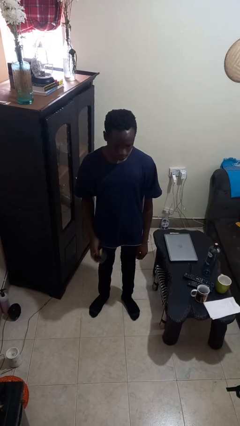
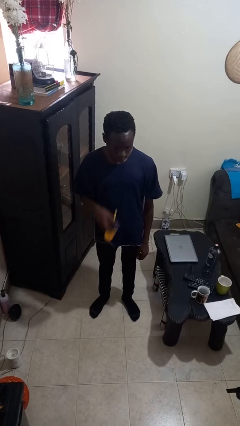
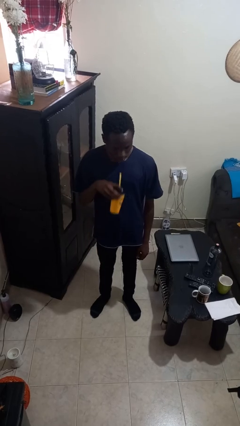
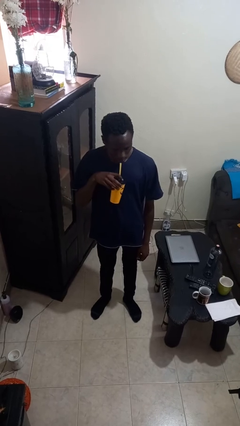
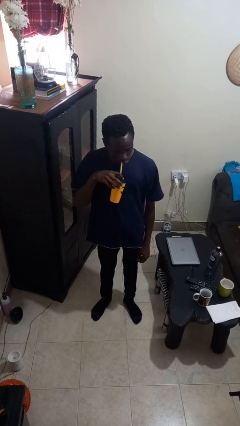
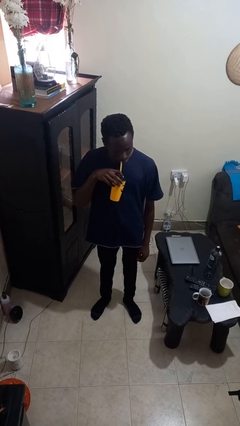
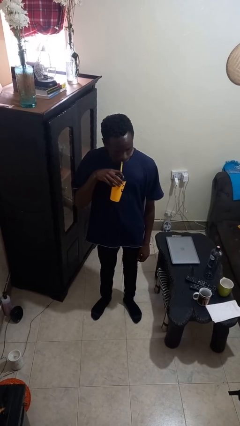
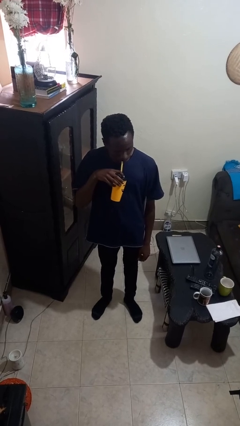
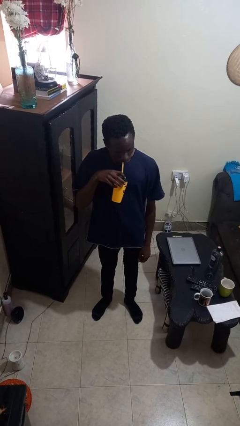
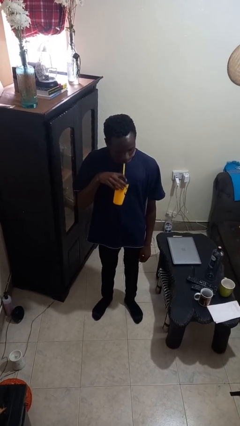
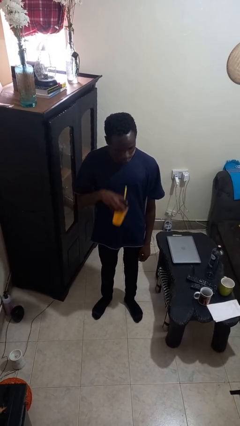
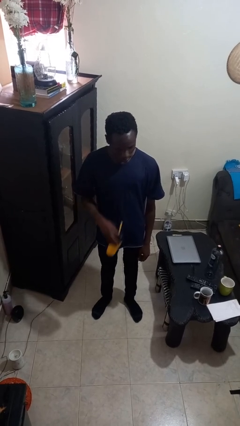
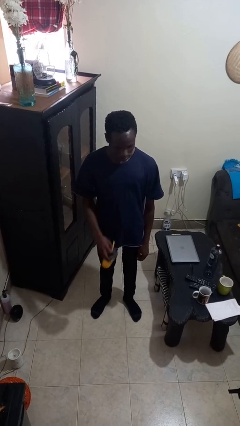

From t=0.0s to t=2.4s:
person drinks from straw

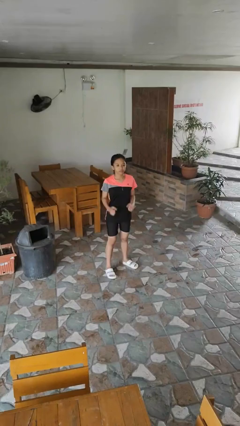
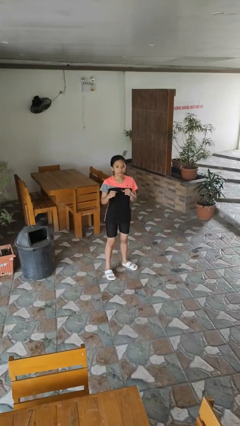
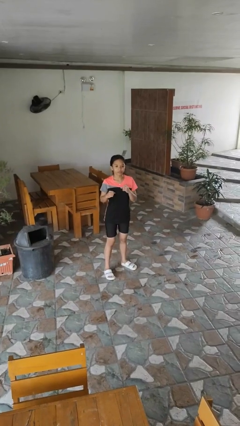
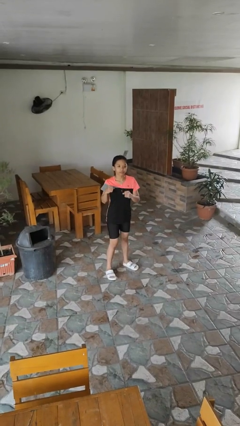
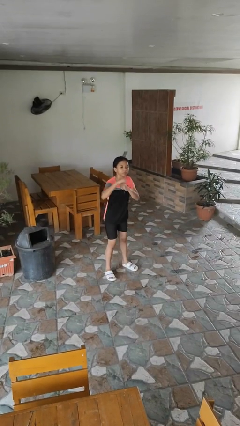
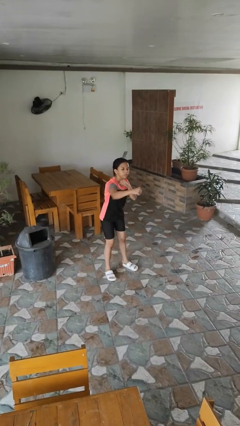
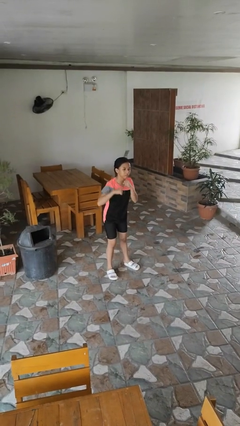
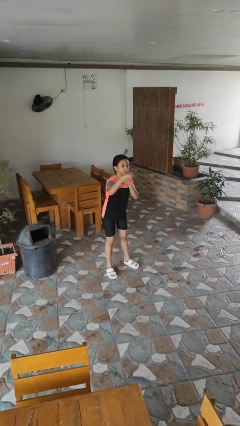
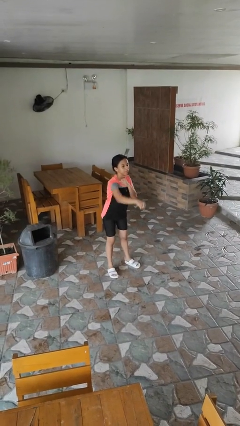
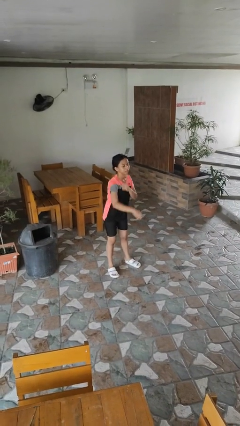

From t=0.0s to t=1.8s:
person punches

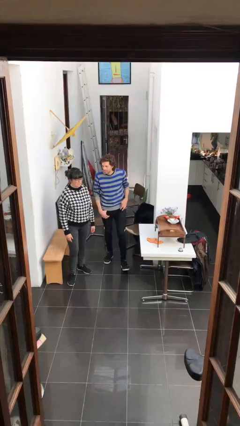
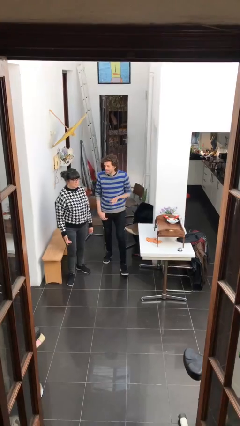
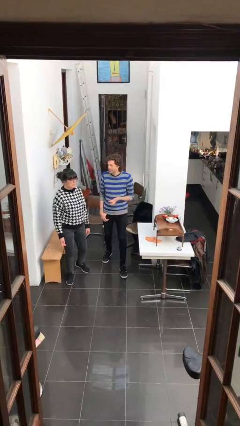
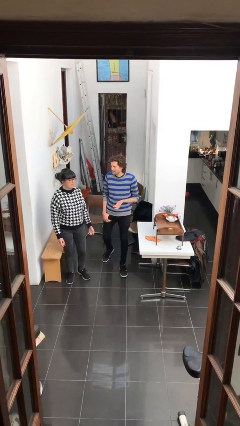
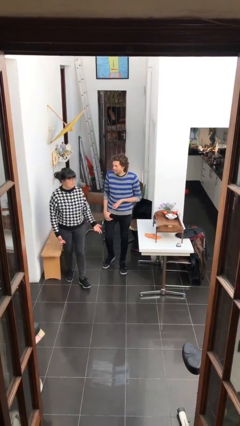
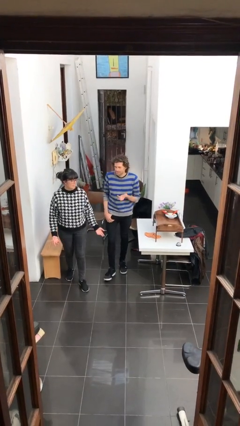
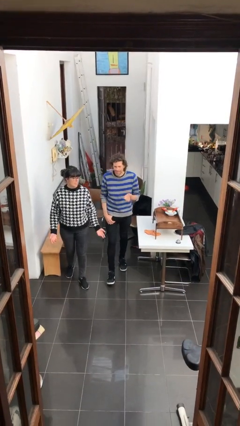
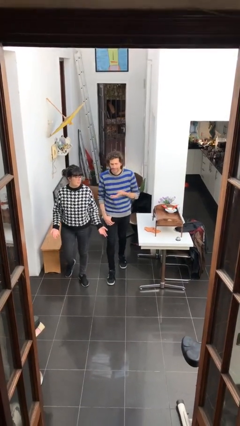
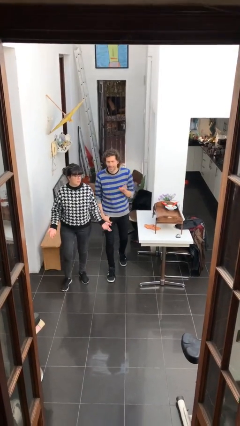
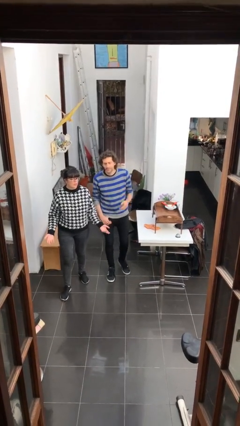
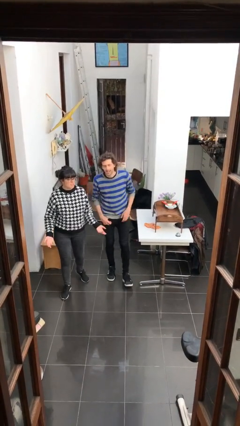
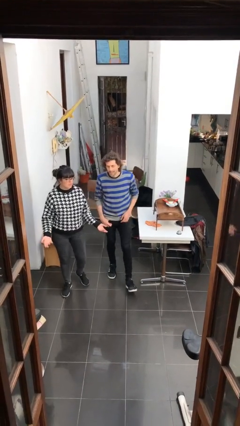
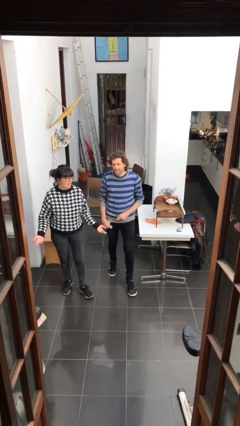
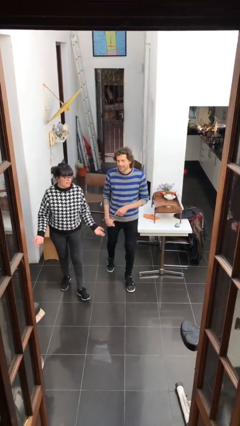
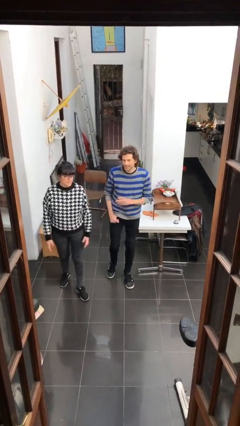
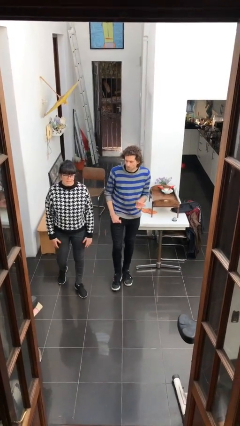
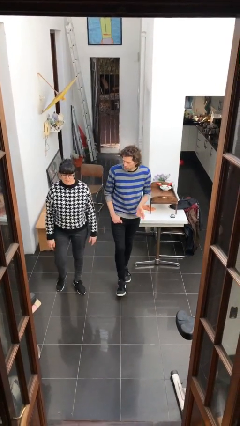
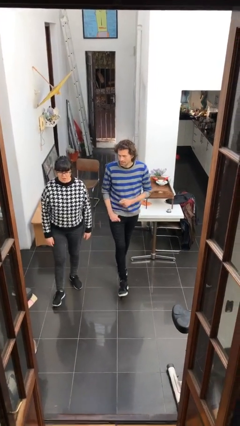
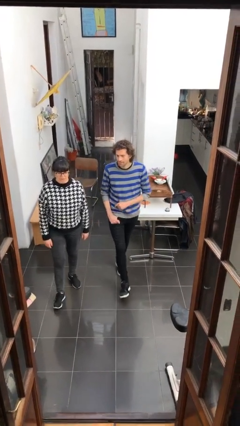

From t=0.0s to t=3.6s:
person talks to person

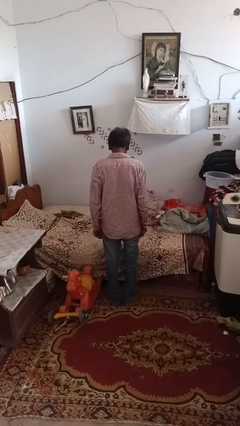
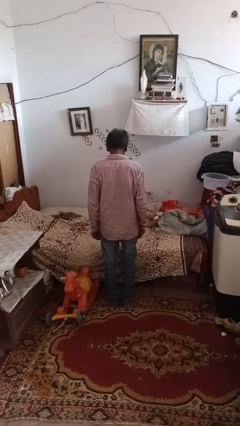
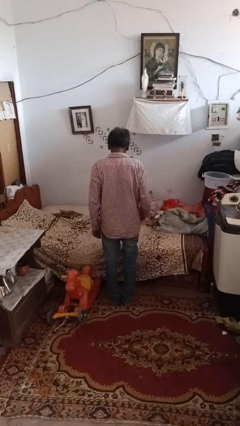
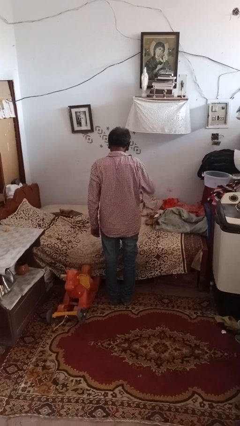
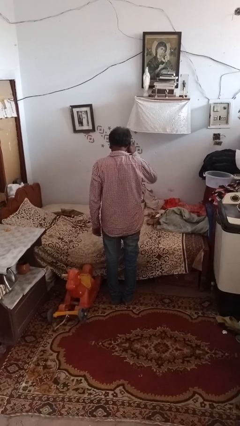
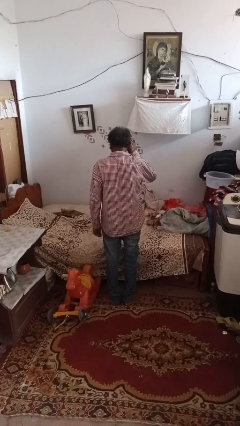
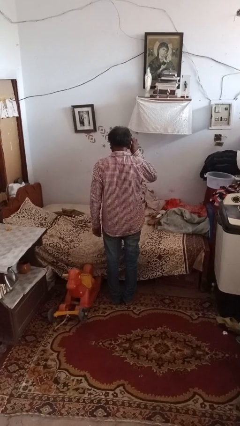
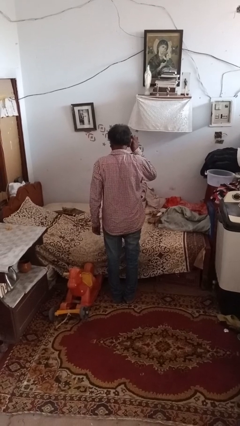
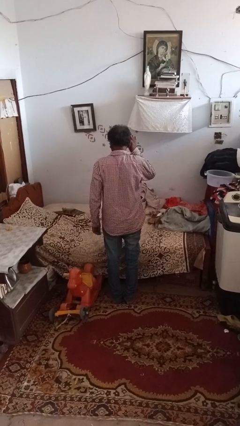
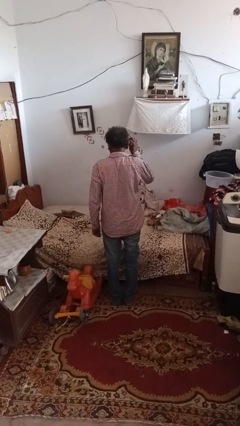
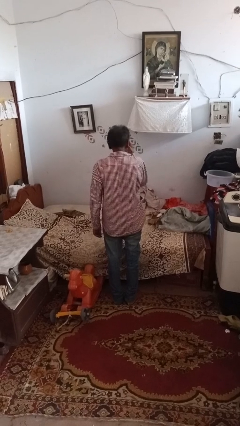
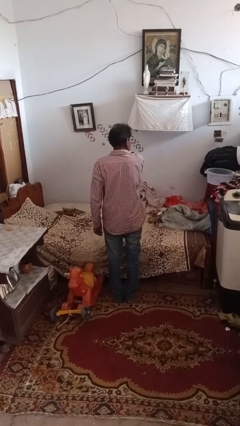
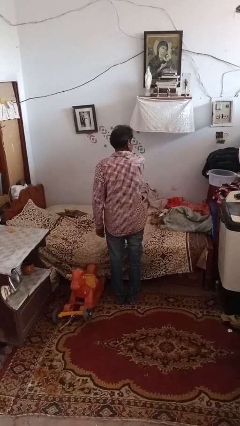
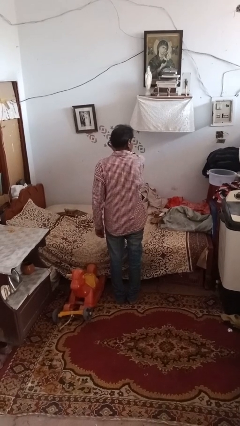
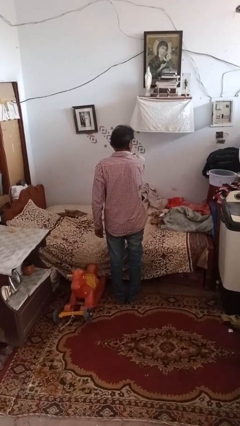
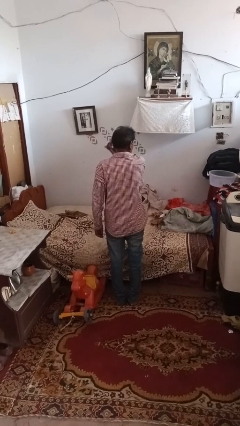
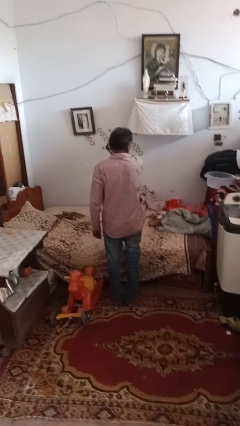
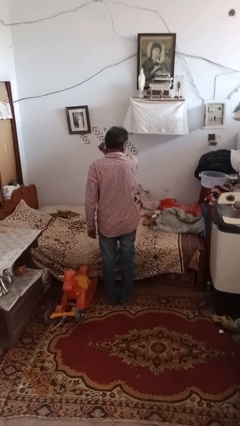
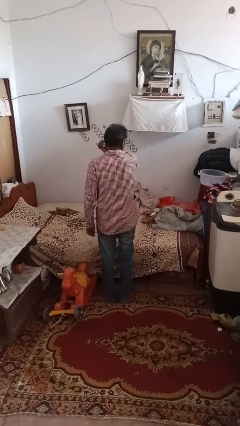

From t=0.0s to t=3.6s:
person shades eyes

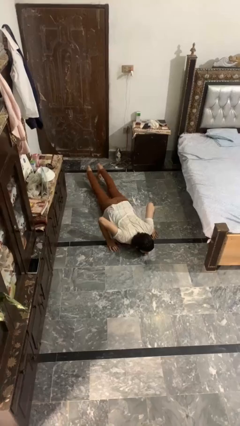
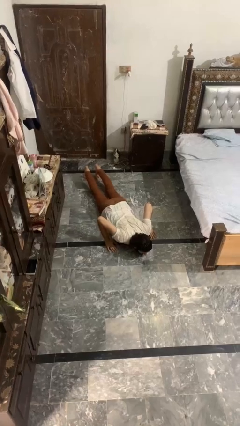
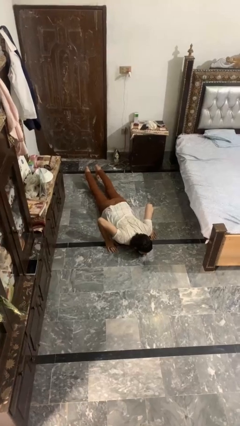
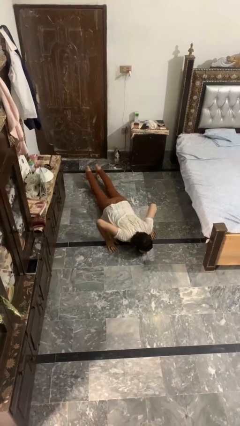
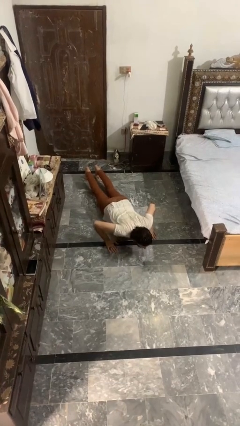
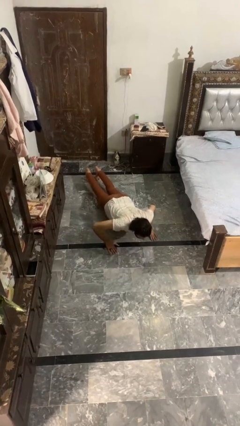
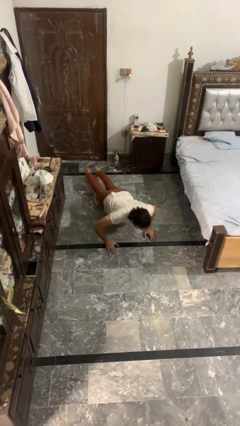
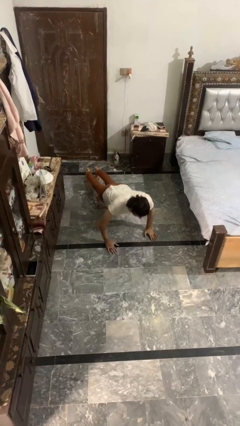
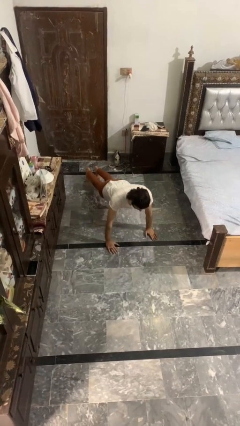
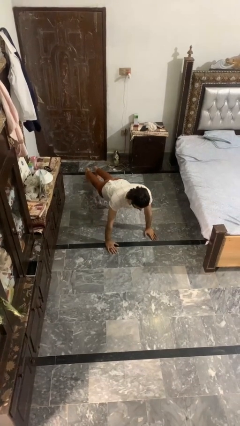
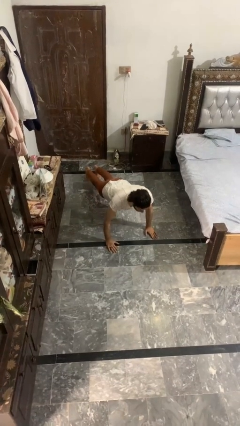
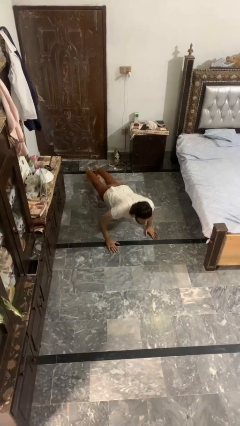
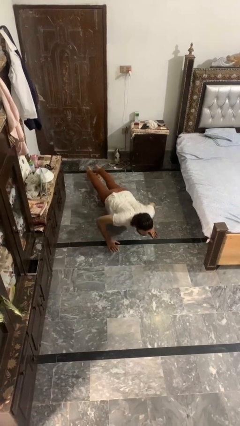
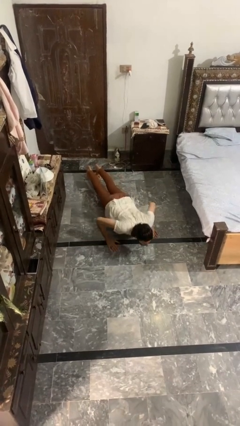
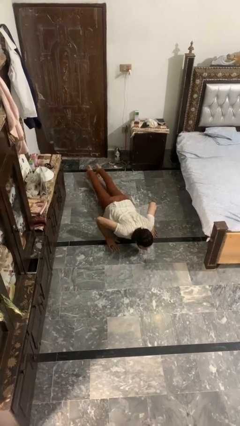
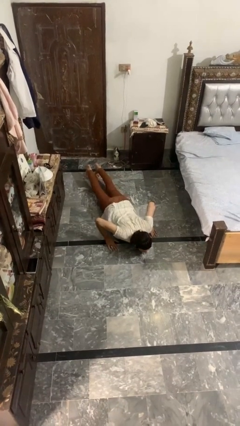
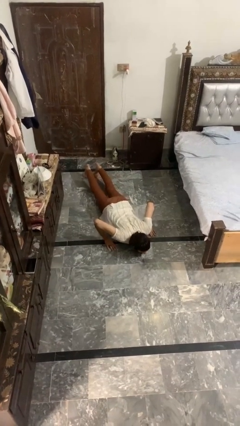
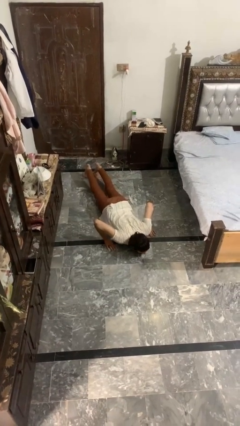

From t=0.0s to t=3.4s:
person exercises with pushup

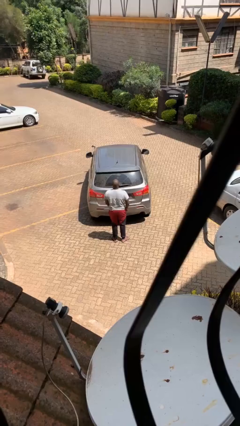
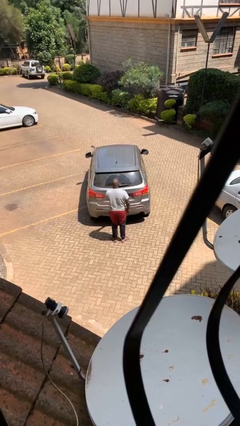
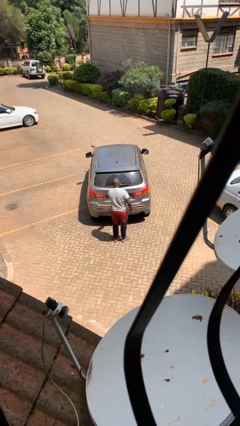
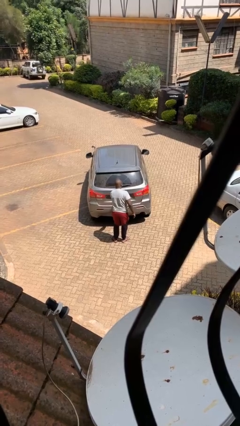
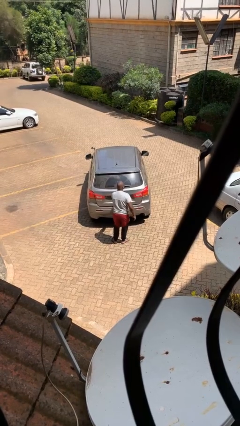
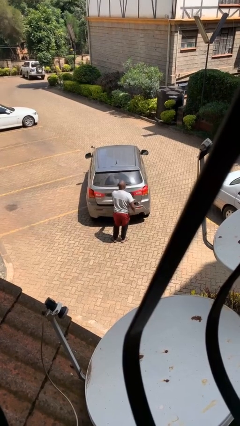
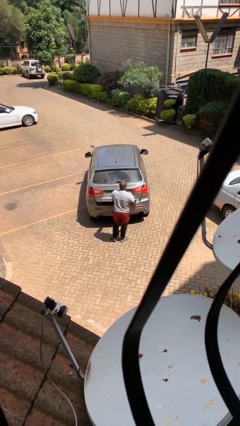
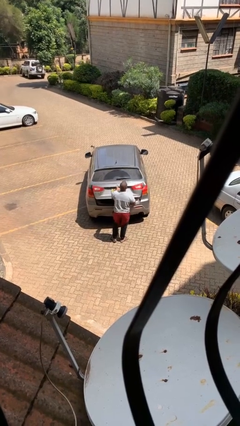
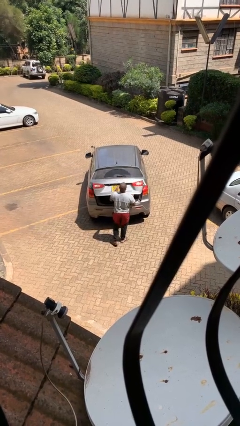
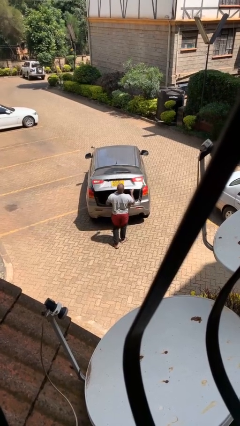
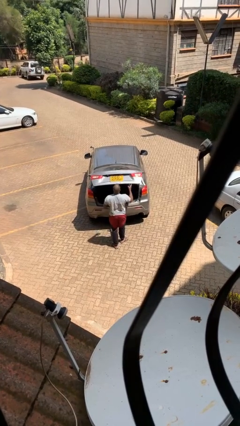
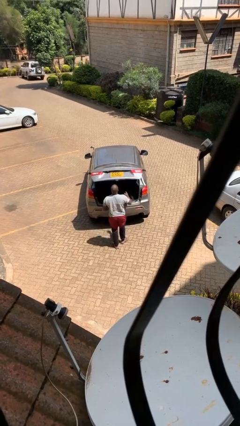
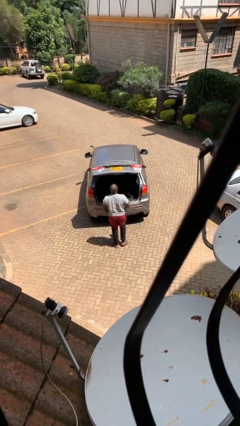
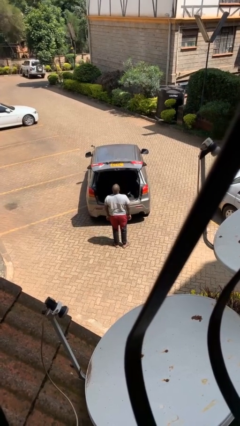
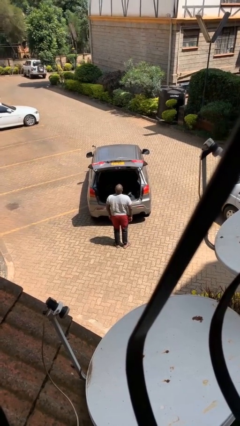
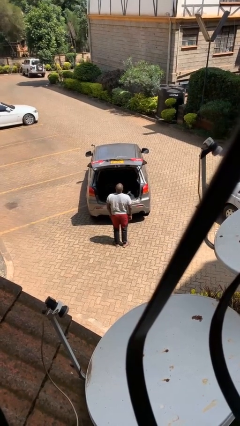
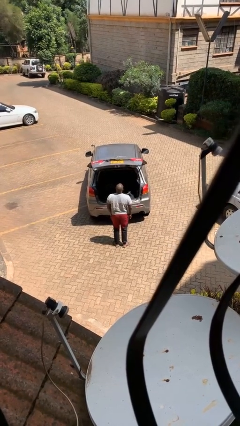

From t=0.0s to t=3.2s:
person opens car trunk
